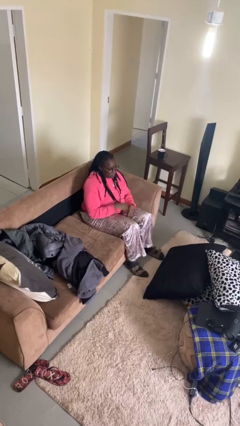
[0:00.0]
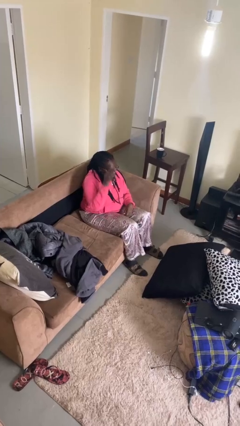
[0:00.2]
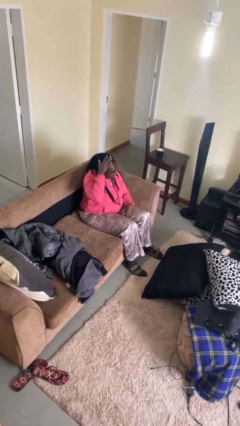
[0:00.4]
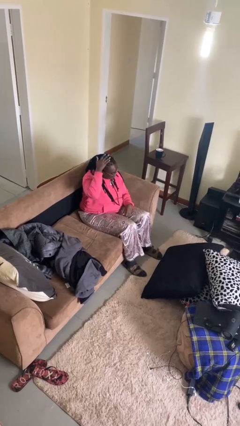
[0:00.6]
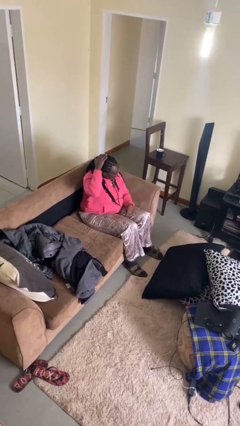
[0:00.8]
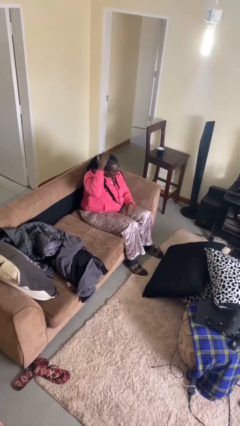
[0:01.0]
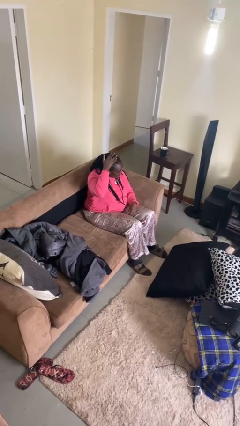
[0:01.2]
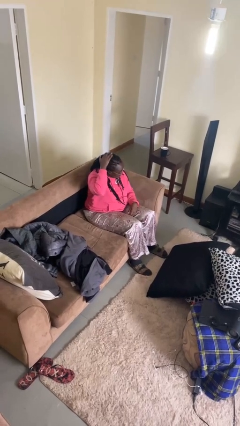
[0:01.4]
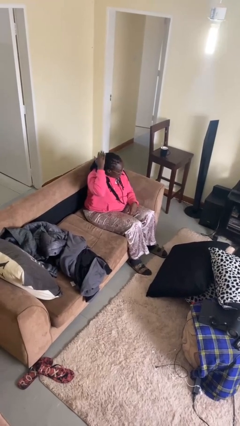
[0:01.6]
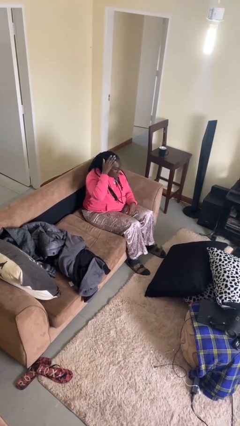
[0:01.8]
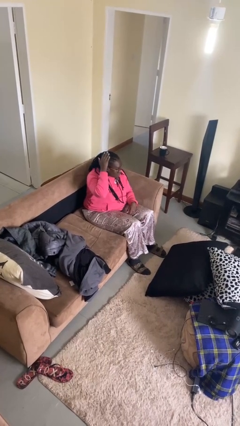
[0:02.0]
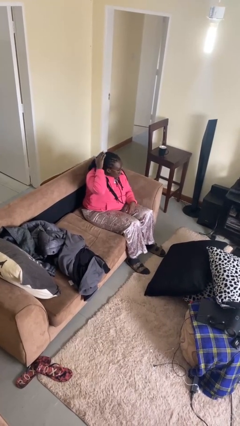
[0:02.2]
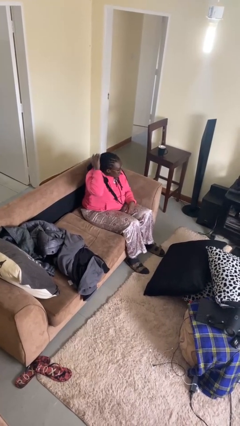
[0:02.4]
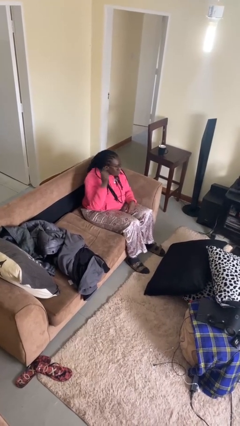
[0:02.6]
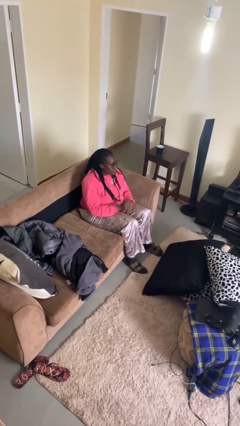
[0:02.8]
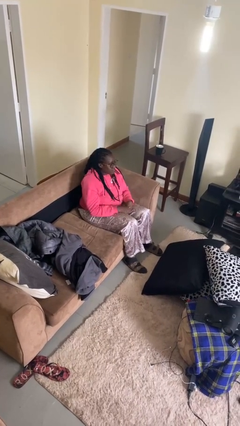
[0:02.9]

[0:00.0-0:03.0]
person strokes hair

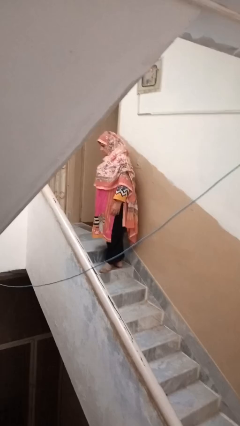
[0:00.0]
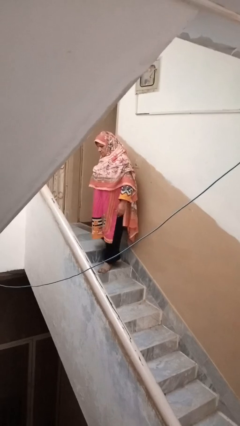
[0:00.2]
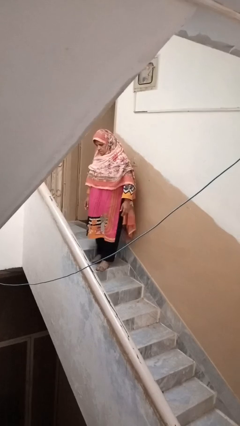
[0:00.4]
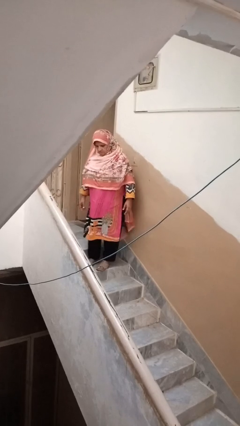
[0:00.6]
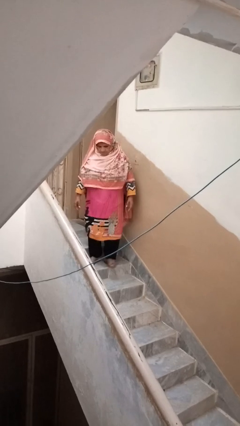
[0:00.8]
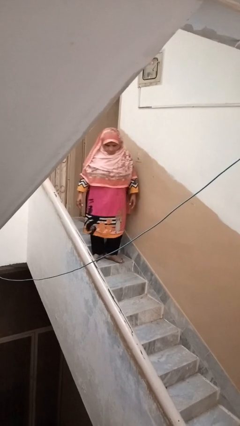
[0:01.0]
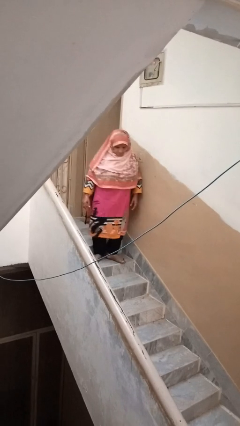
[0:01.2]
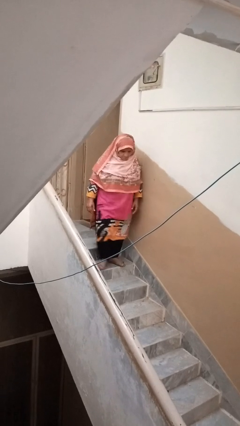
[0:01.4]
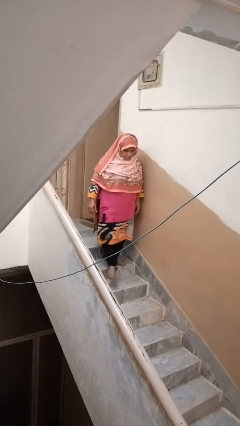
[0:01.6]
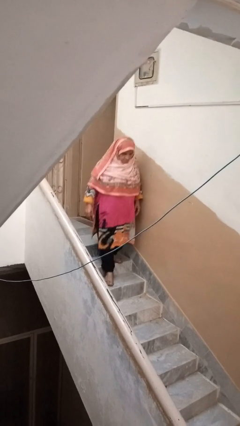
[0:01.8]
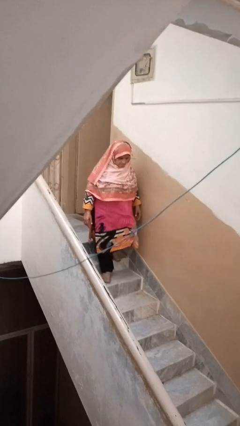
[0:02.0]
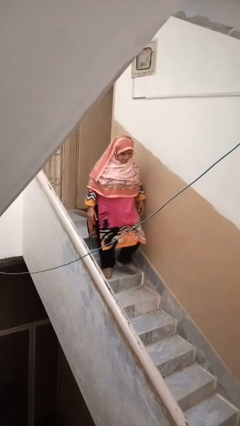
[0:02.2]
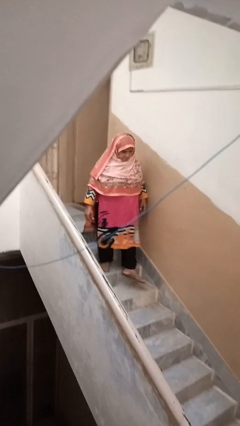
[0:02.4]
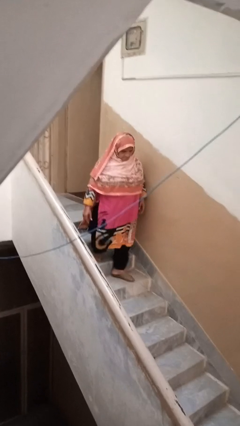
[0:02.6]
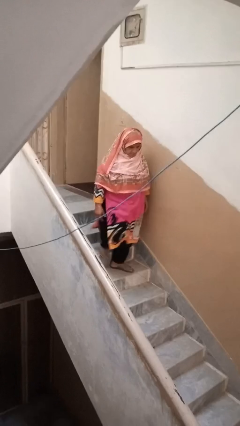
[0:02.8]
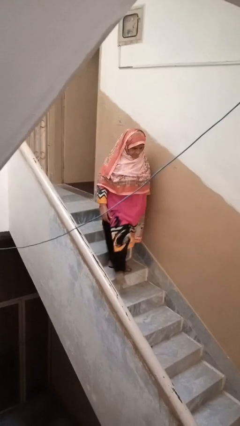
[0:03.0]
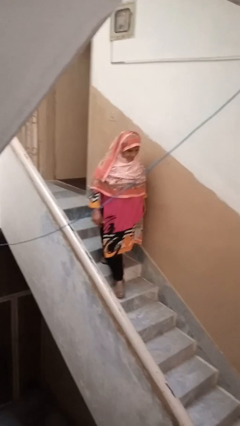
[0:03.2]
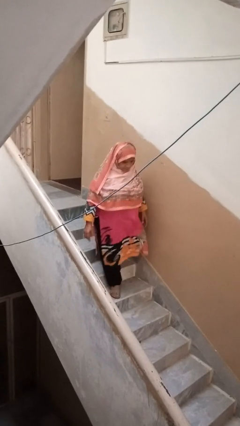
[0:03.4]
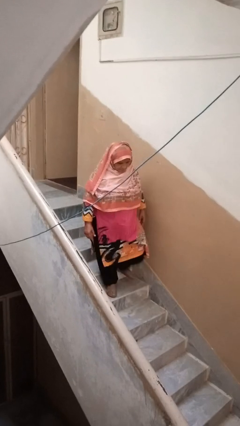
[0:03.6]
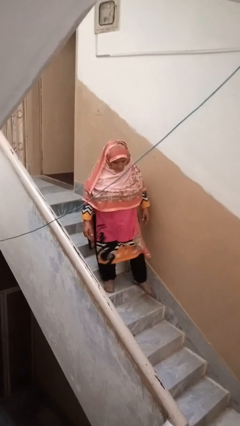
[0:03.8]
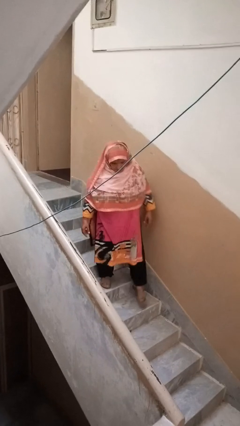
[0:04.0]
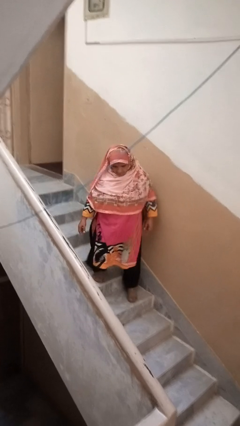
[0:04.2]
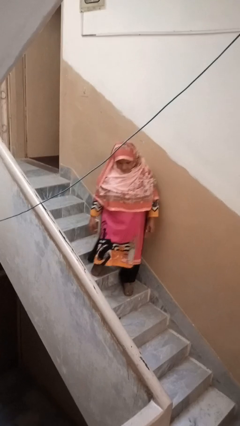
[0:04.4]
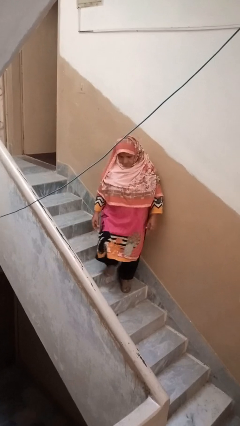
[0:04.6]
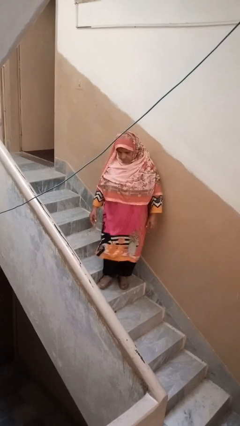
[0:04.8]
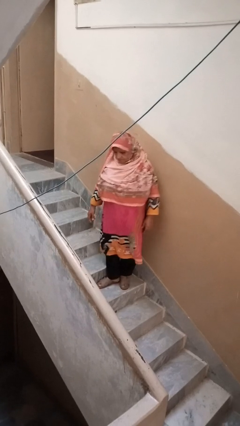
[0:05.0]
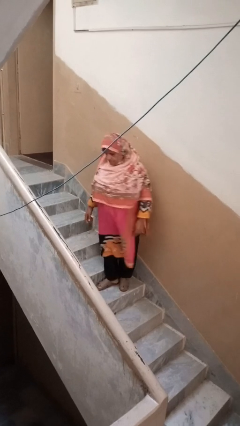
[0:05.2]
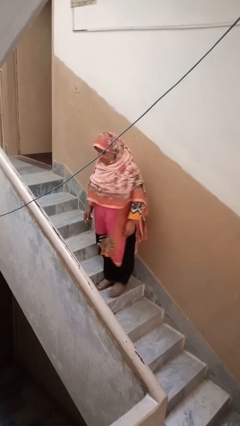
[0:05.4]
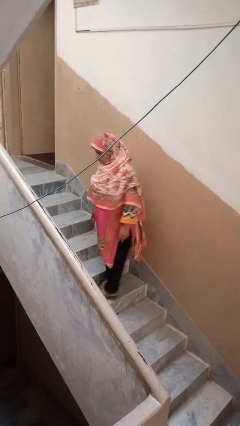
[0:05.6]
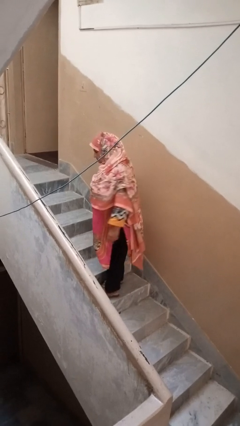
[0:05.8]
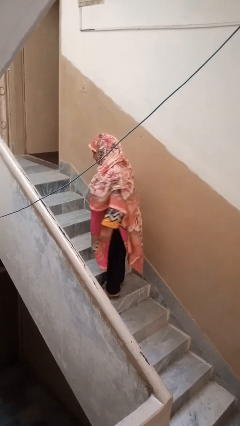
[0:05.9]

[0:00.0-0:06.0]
person climbs down stairs

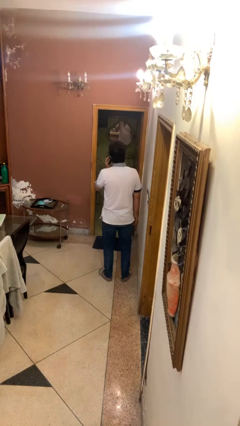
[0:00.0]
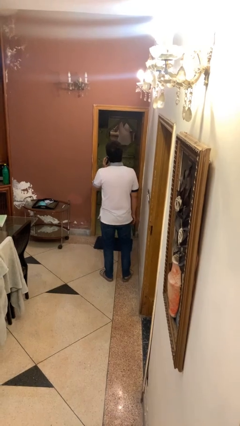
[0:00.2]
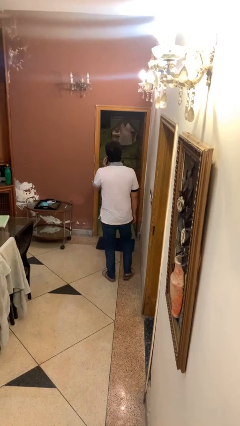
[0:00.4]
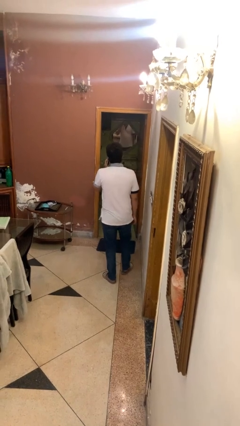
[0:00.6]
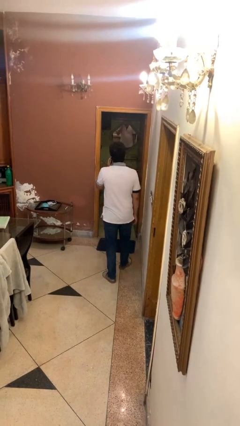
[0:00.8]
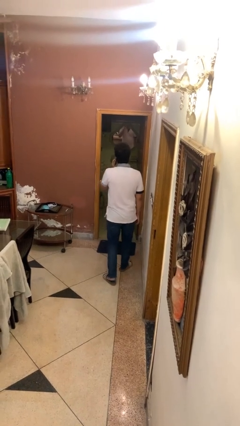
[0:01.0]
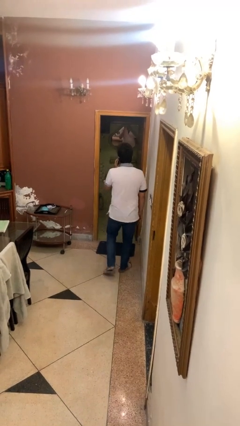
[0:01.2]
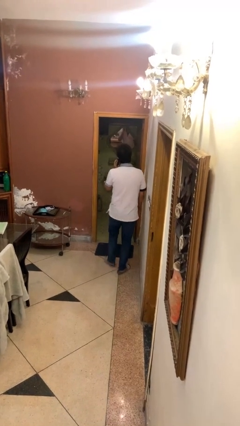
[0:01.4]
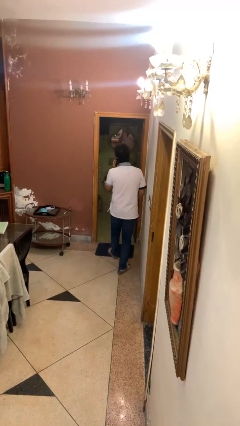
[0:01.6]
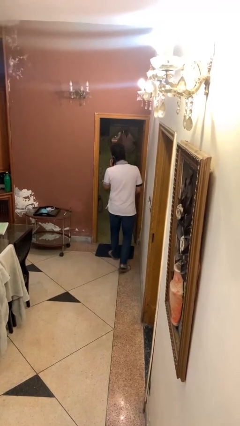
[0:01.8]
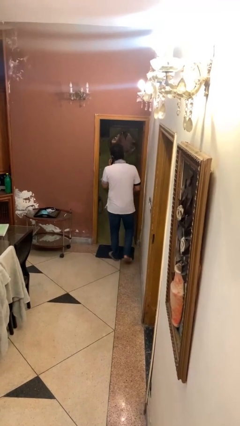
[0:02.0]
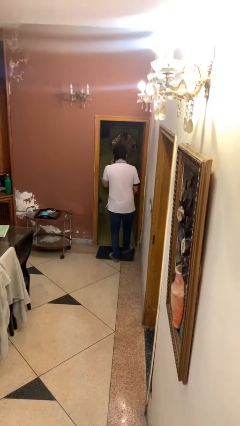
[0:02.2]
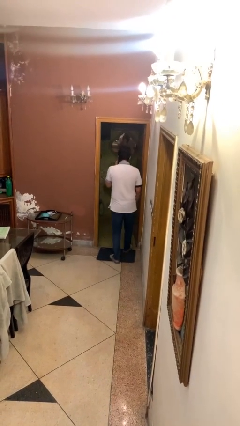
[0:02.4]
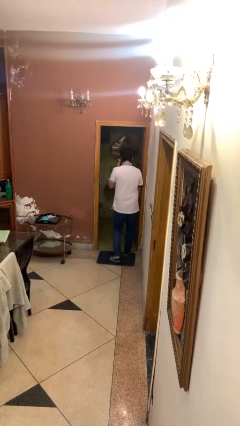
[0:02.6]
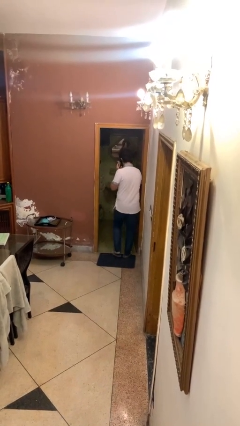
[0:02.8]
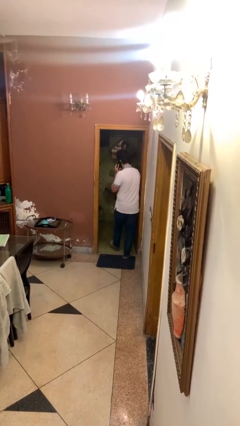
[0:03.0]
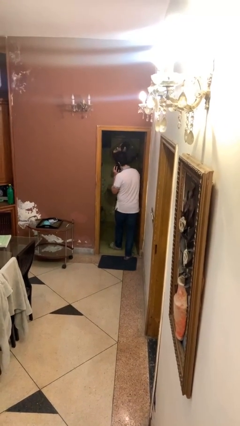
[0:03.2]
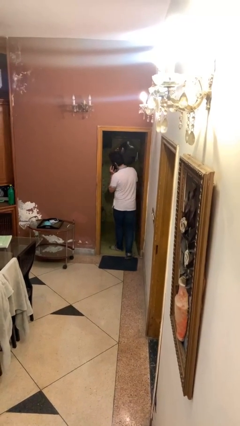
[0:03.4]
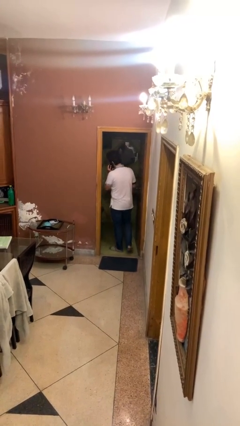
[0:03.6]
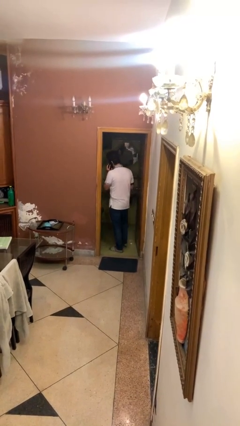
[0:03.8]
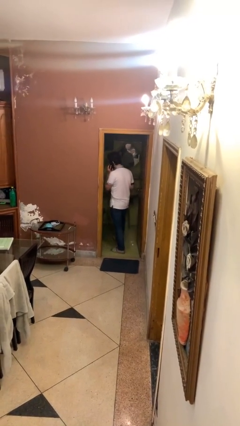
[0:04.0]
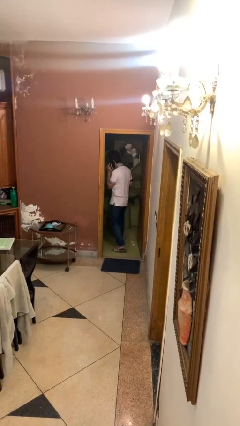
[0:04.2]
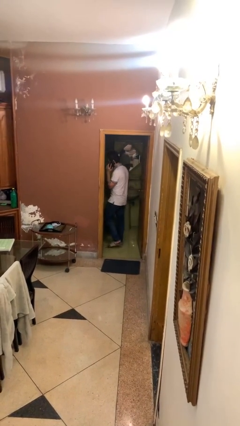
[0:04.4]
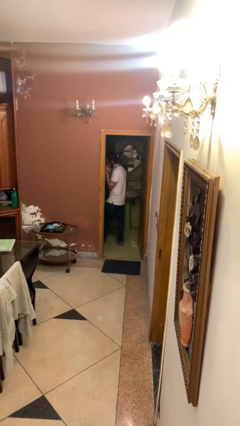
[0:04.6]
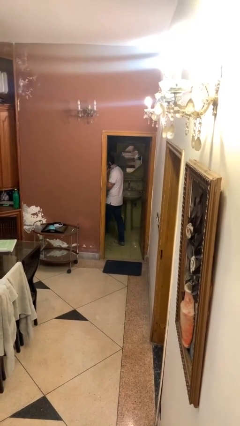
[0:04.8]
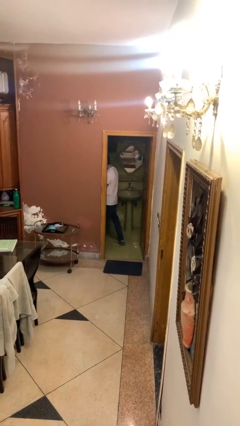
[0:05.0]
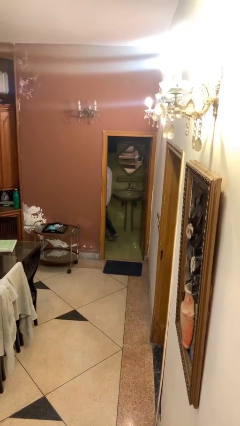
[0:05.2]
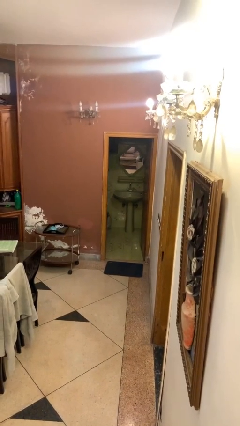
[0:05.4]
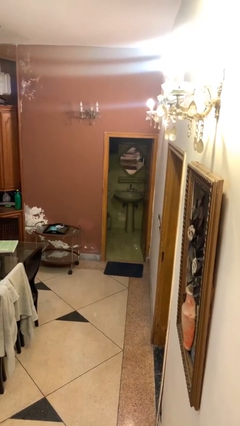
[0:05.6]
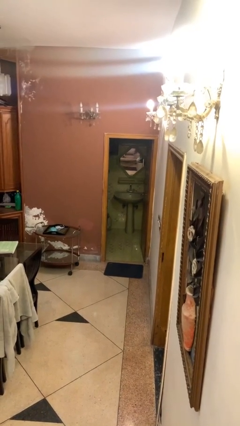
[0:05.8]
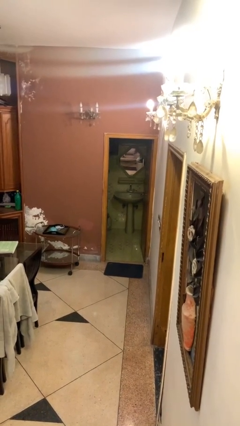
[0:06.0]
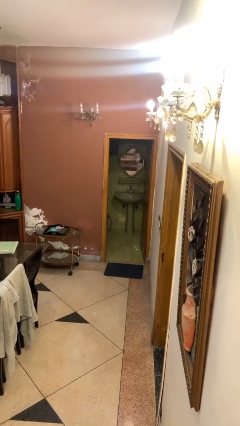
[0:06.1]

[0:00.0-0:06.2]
person exits scene through structure

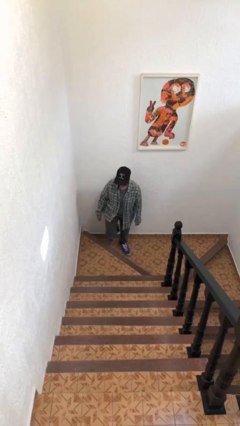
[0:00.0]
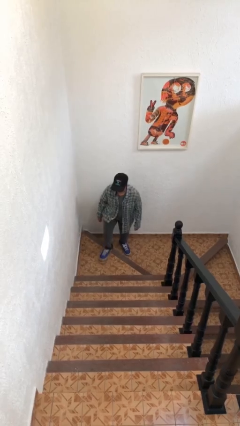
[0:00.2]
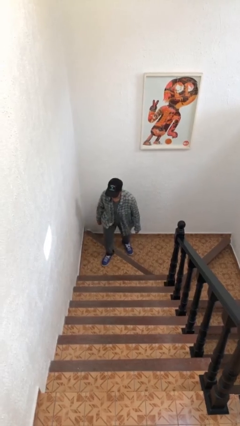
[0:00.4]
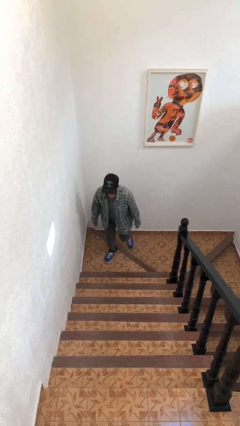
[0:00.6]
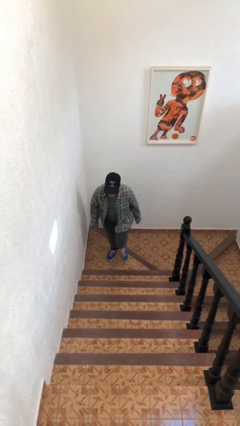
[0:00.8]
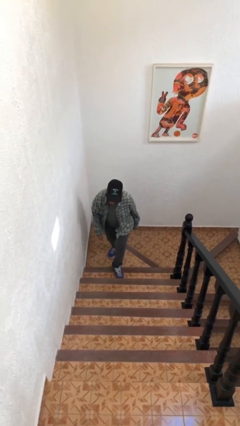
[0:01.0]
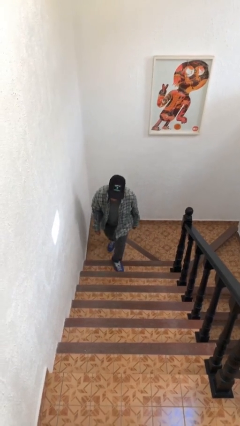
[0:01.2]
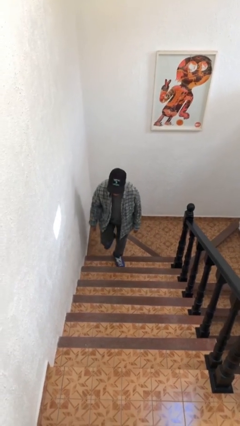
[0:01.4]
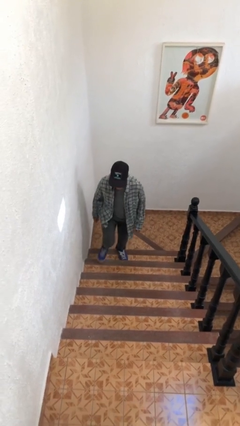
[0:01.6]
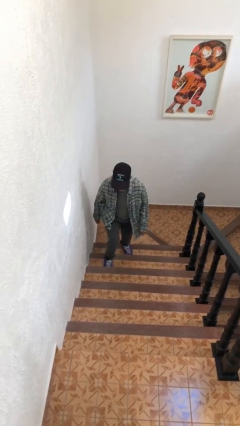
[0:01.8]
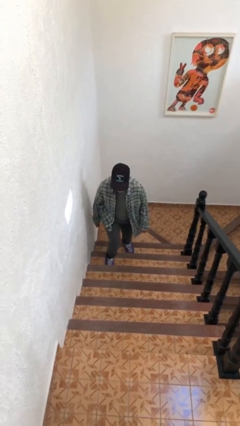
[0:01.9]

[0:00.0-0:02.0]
person climbs up stairs
